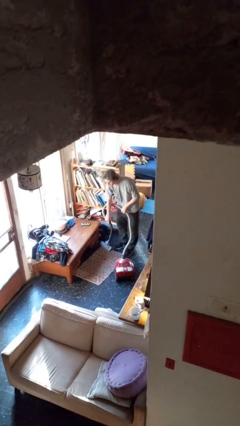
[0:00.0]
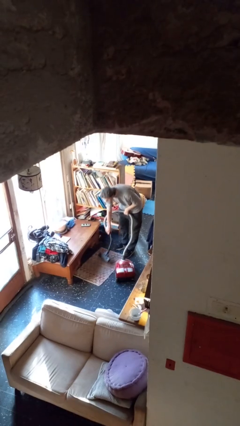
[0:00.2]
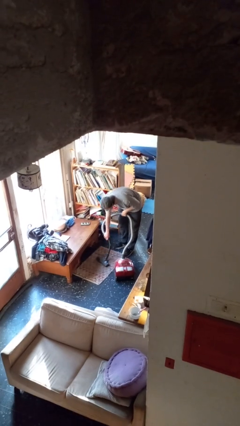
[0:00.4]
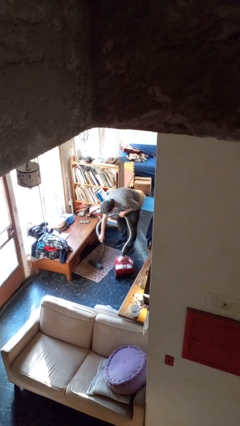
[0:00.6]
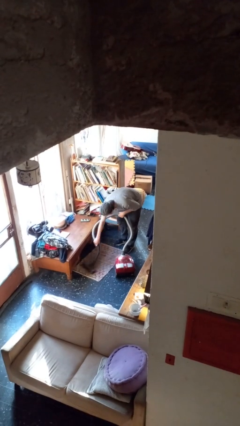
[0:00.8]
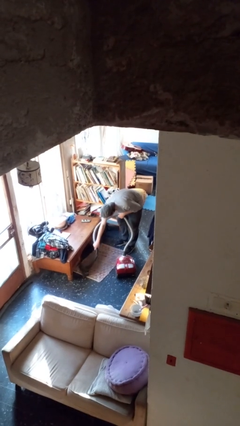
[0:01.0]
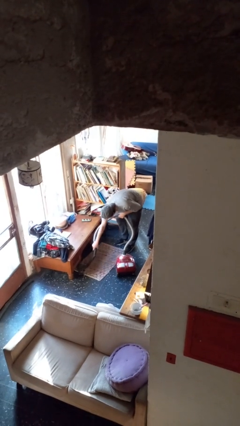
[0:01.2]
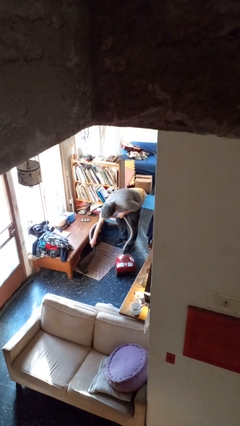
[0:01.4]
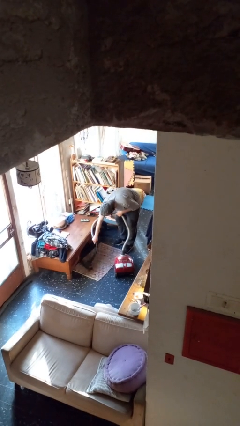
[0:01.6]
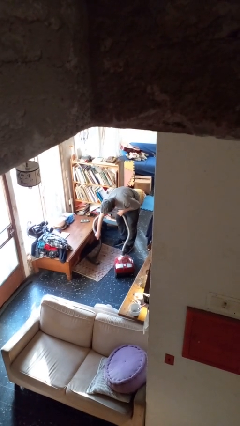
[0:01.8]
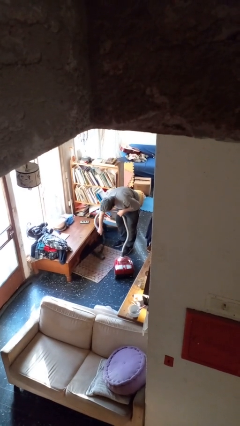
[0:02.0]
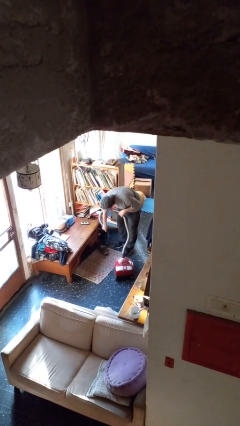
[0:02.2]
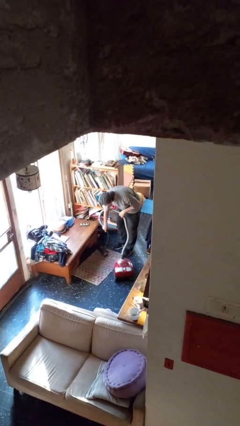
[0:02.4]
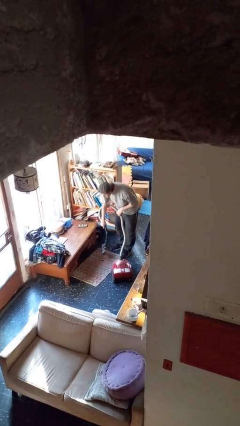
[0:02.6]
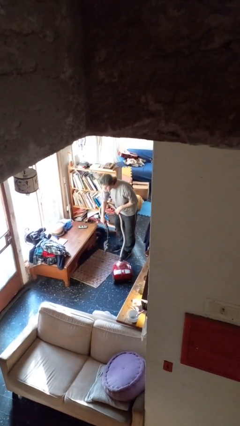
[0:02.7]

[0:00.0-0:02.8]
person vacuums carpet

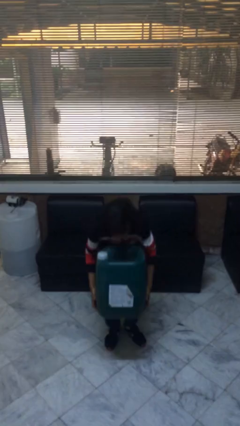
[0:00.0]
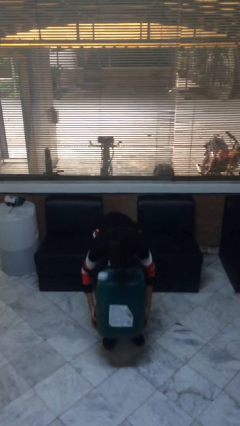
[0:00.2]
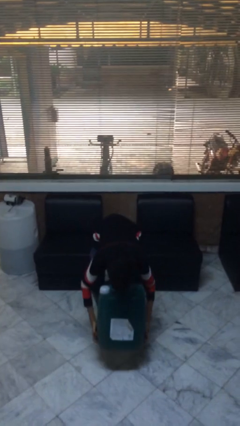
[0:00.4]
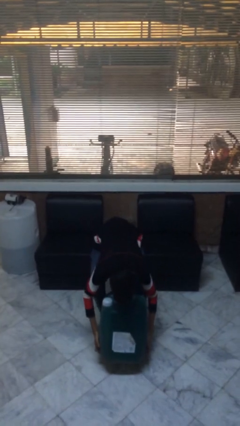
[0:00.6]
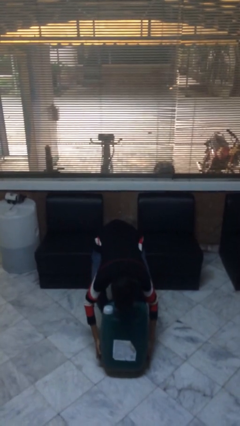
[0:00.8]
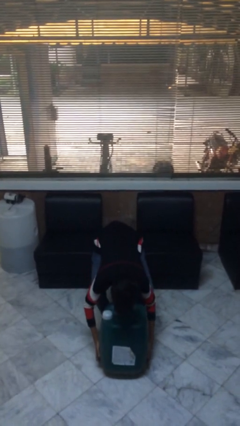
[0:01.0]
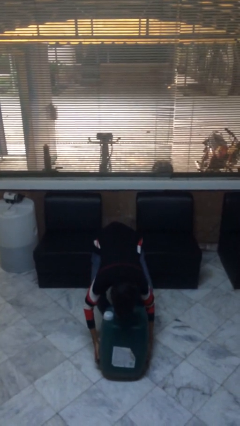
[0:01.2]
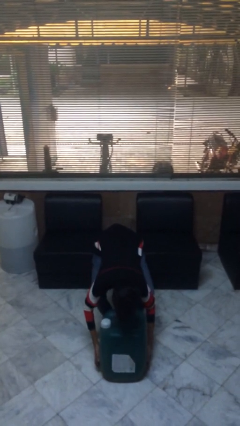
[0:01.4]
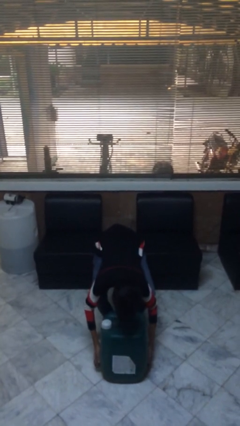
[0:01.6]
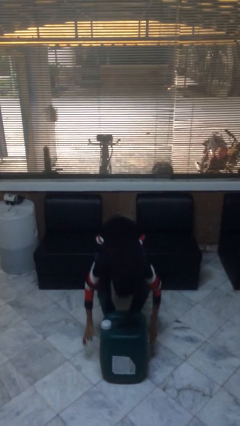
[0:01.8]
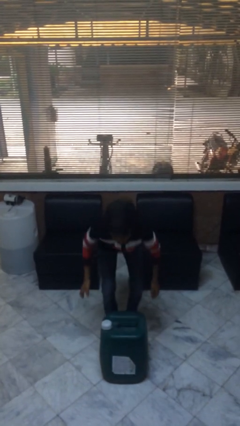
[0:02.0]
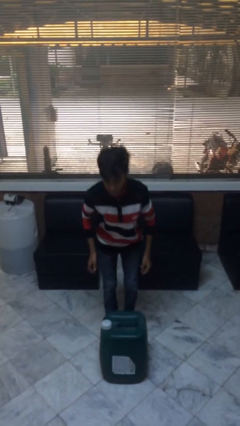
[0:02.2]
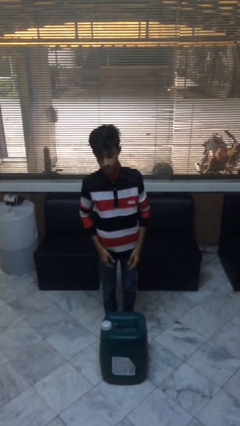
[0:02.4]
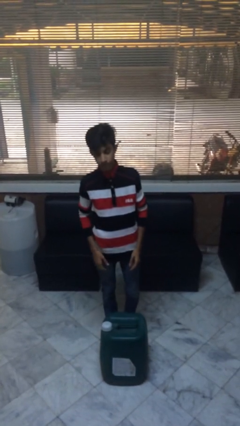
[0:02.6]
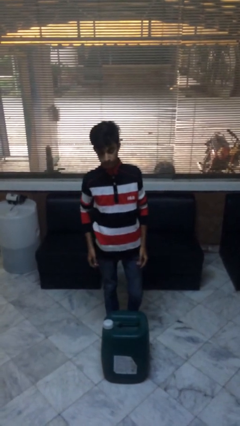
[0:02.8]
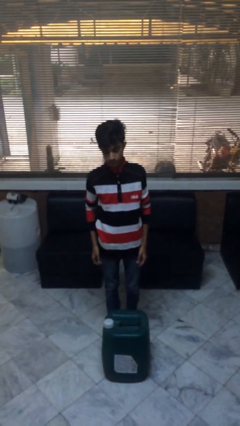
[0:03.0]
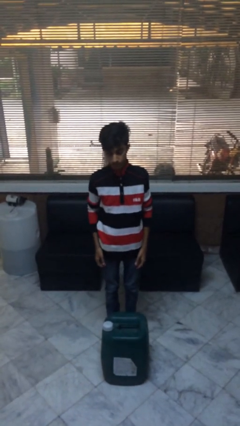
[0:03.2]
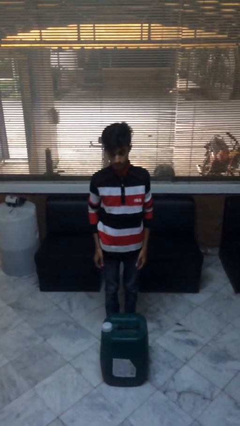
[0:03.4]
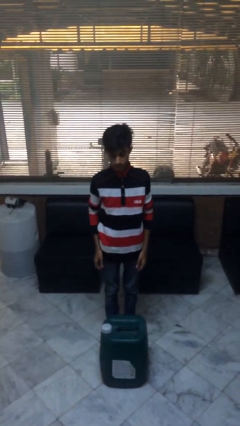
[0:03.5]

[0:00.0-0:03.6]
person puts down object on floor

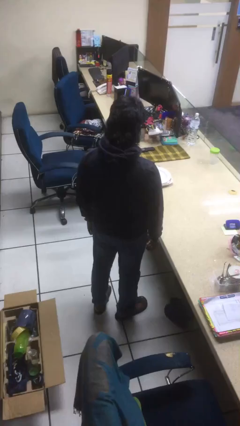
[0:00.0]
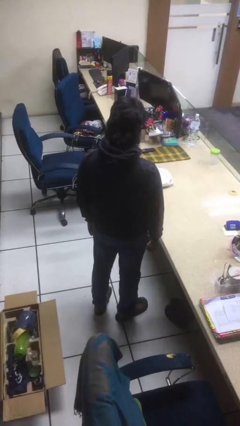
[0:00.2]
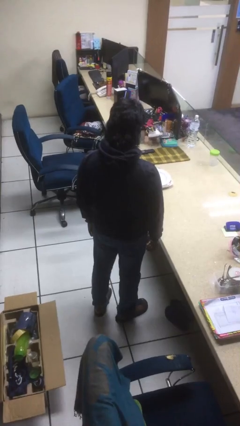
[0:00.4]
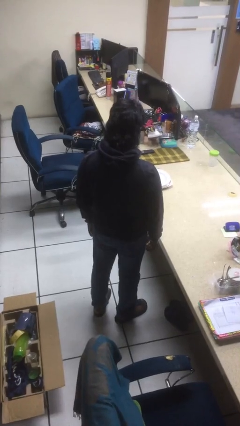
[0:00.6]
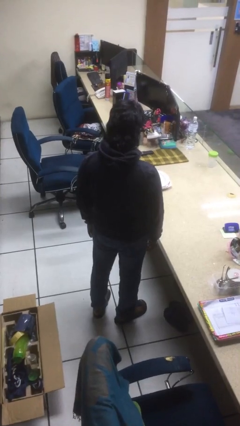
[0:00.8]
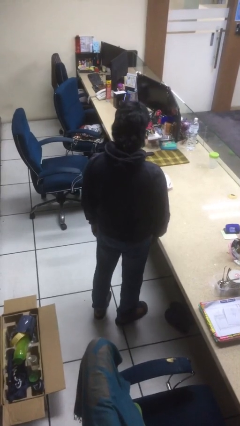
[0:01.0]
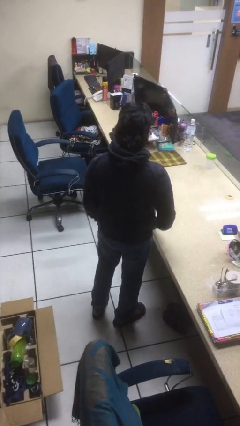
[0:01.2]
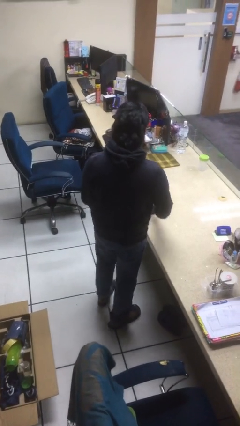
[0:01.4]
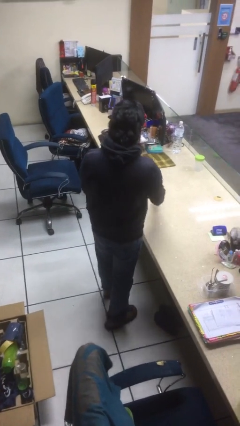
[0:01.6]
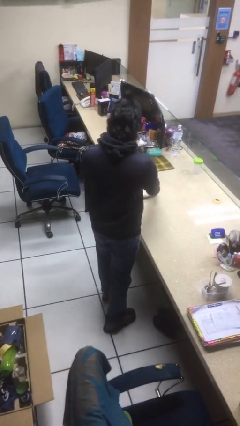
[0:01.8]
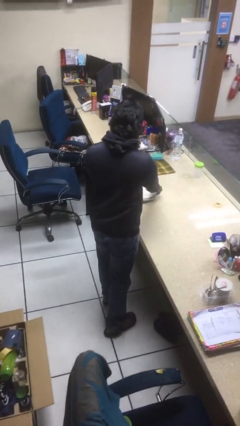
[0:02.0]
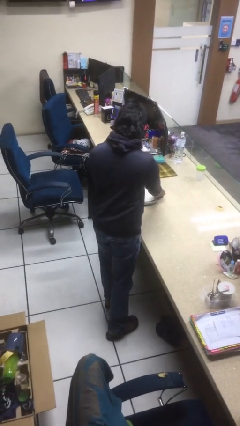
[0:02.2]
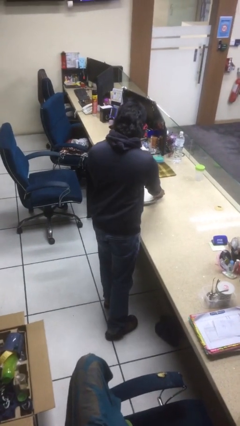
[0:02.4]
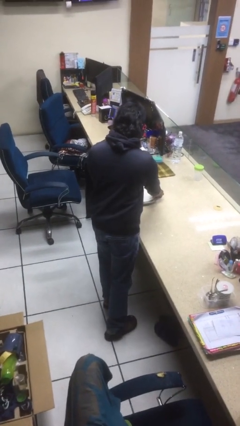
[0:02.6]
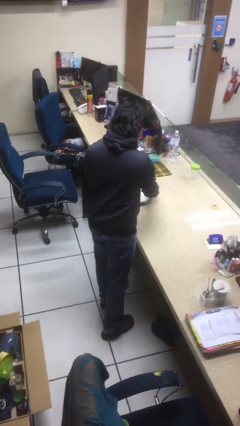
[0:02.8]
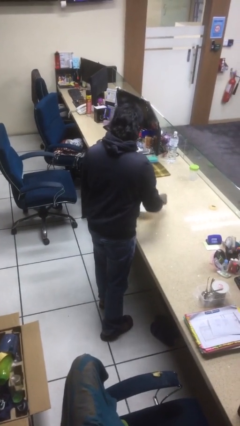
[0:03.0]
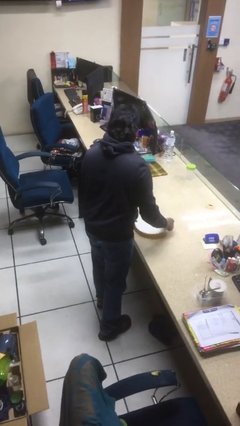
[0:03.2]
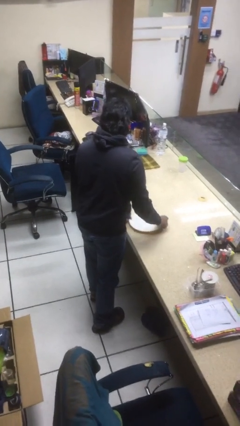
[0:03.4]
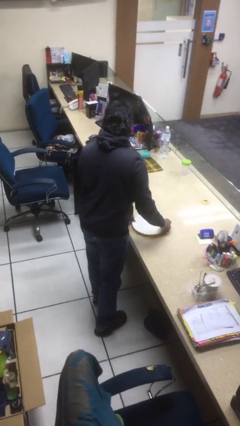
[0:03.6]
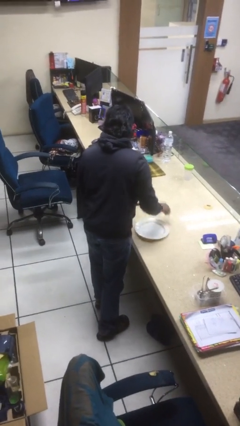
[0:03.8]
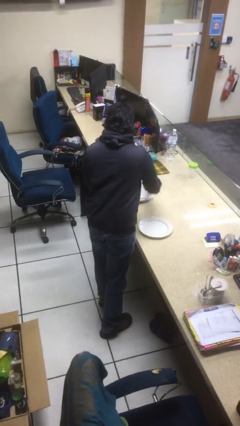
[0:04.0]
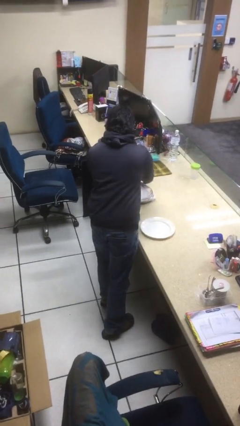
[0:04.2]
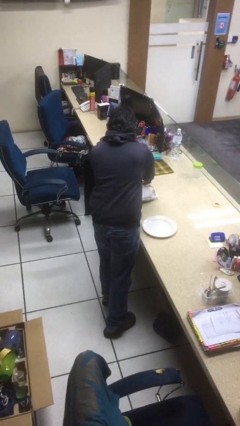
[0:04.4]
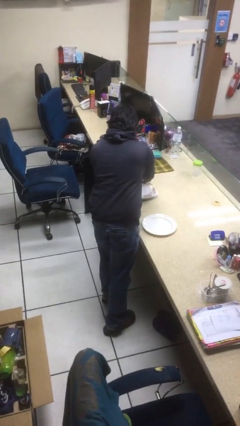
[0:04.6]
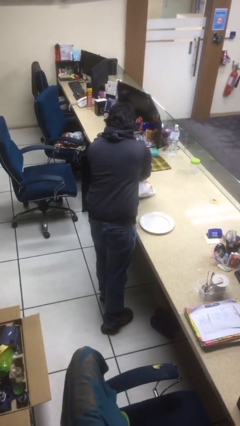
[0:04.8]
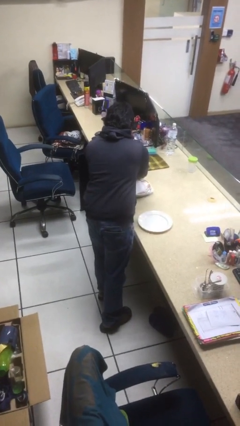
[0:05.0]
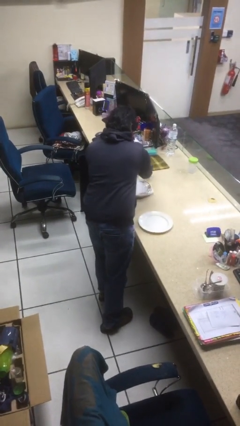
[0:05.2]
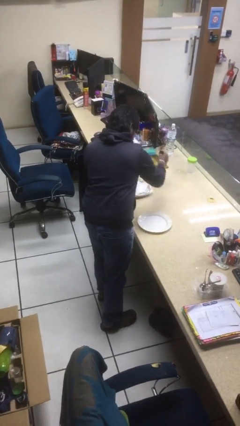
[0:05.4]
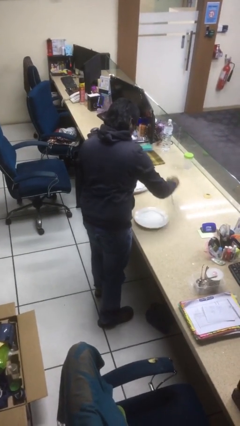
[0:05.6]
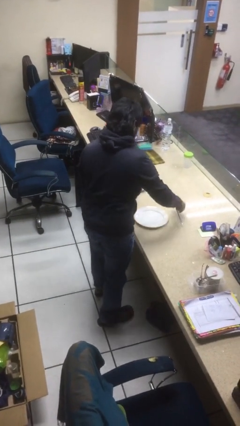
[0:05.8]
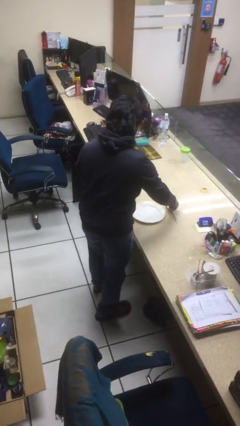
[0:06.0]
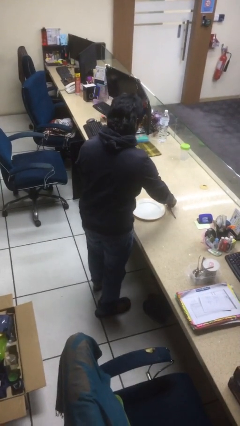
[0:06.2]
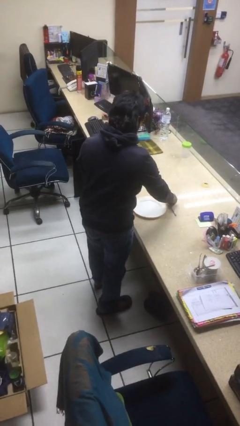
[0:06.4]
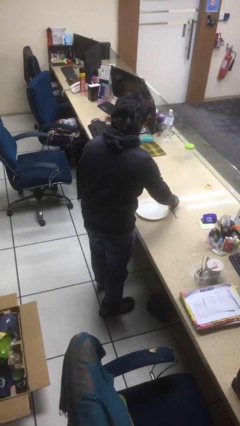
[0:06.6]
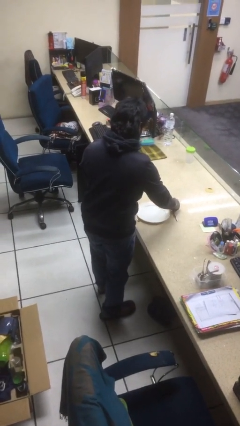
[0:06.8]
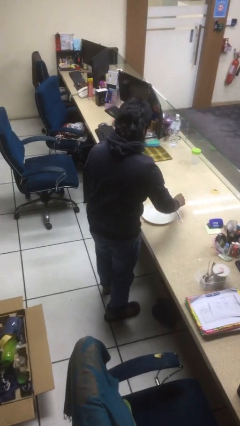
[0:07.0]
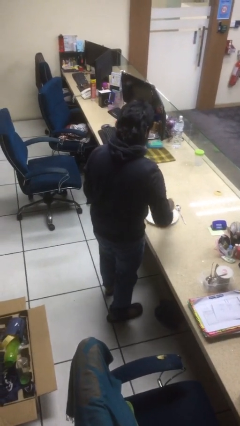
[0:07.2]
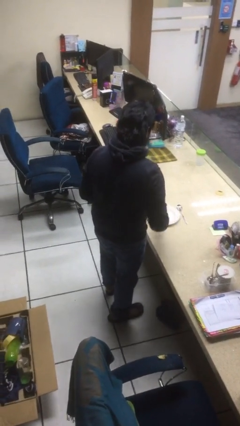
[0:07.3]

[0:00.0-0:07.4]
person sets table

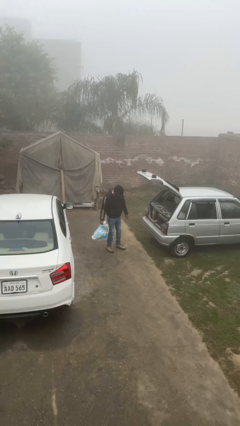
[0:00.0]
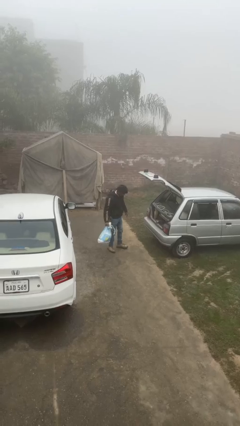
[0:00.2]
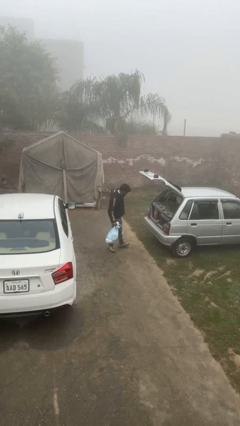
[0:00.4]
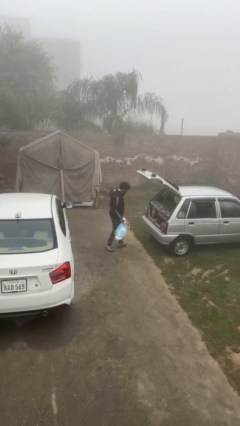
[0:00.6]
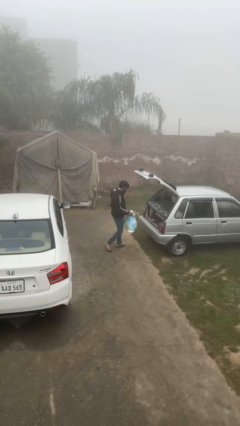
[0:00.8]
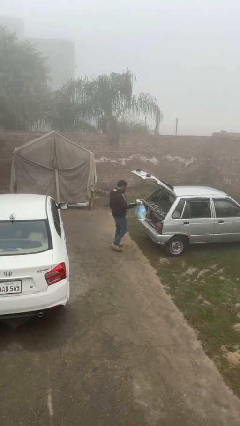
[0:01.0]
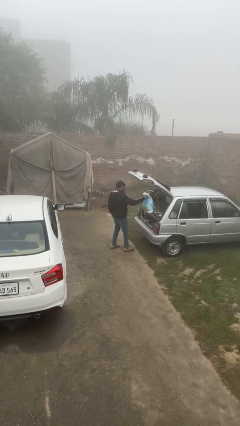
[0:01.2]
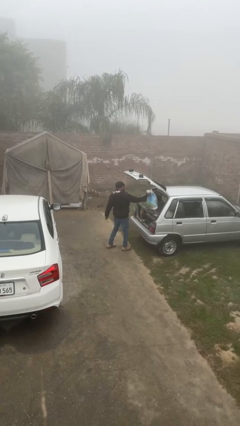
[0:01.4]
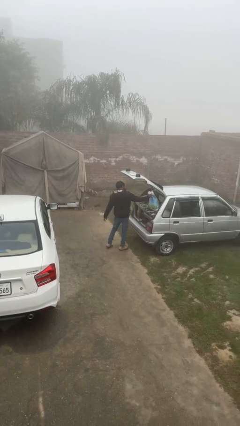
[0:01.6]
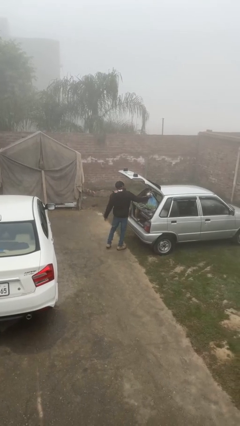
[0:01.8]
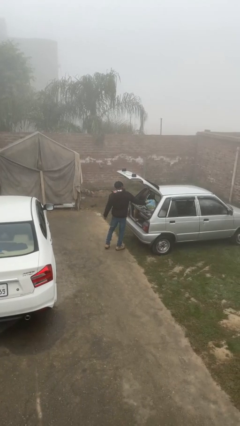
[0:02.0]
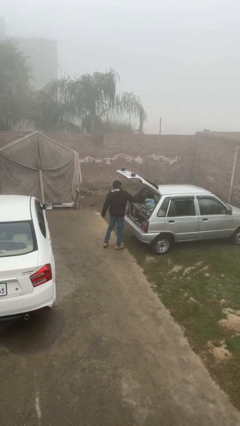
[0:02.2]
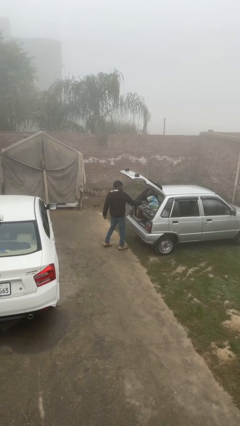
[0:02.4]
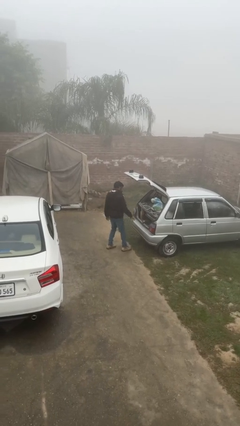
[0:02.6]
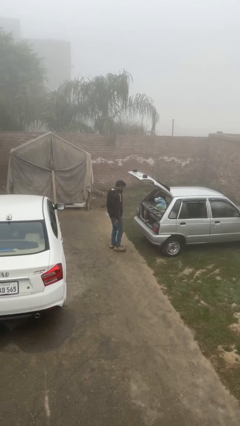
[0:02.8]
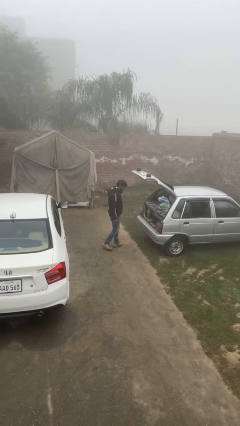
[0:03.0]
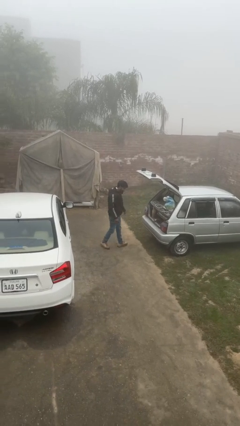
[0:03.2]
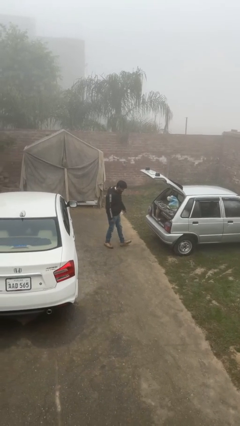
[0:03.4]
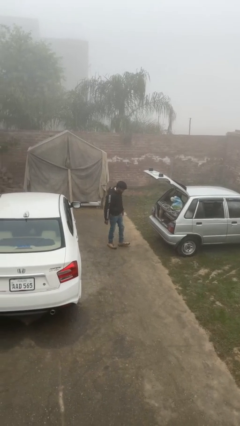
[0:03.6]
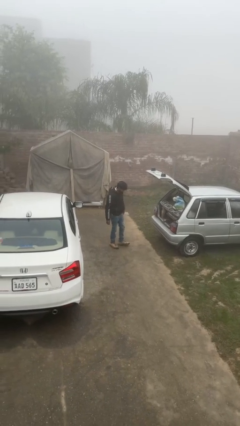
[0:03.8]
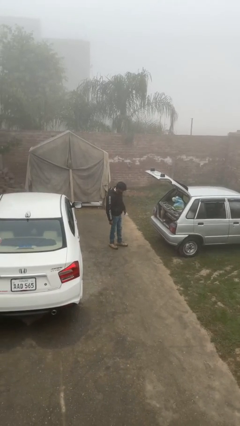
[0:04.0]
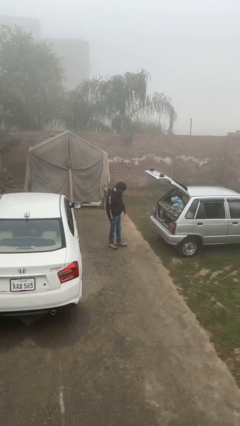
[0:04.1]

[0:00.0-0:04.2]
person loads car
